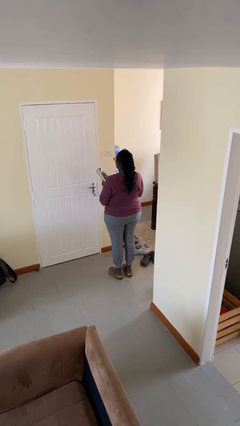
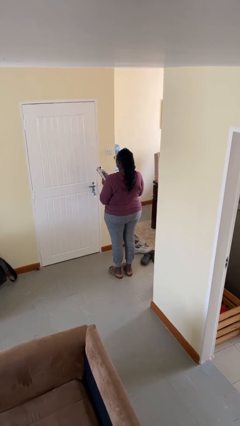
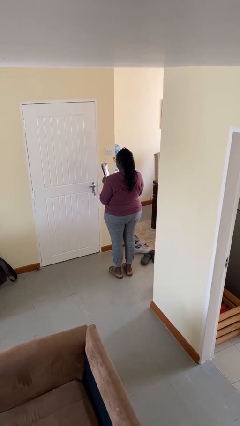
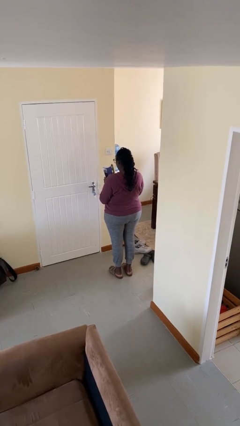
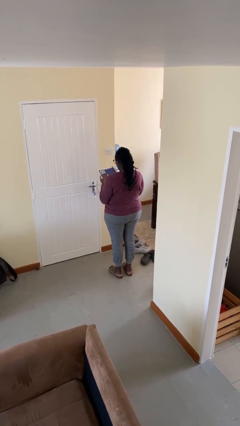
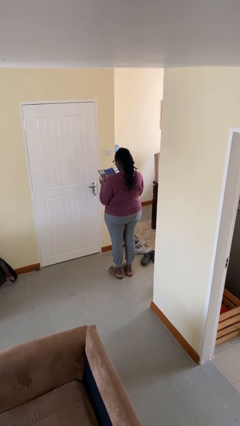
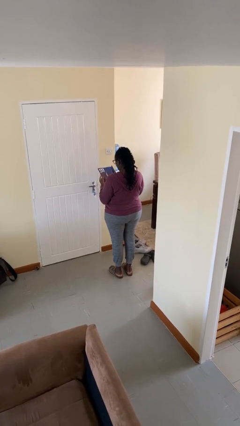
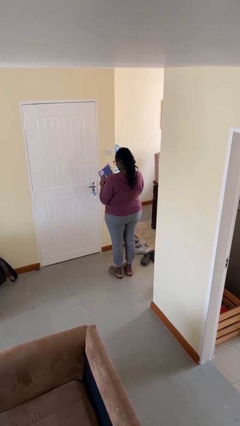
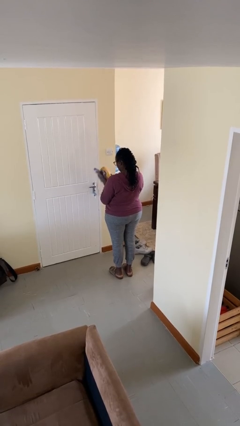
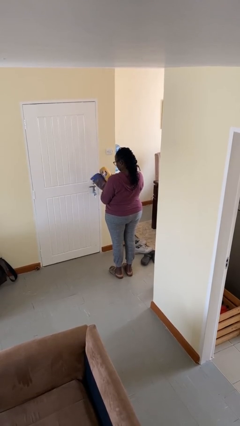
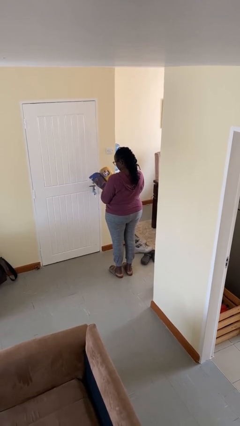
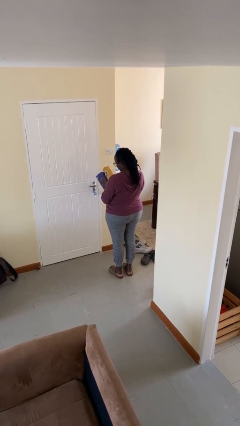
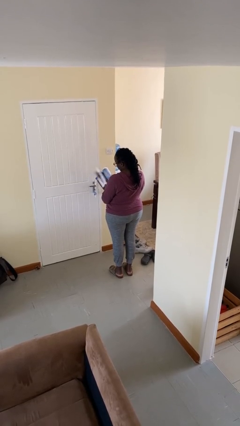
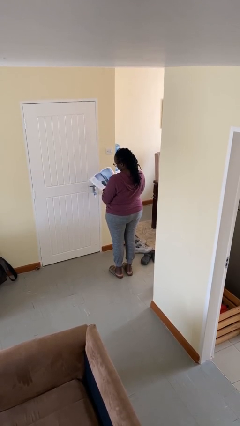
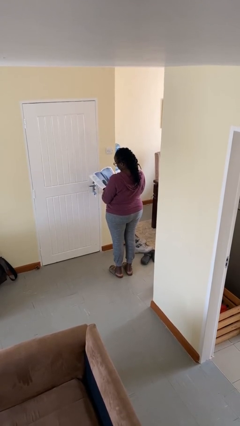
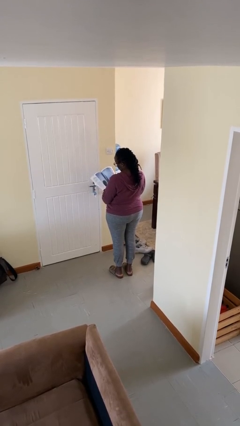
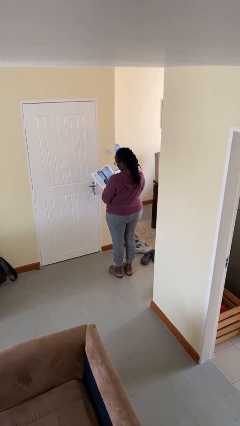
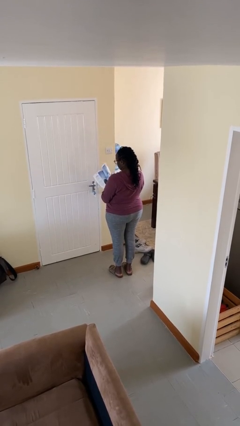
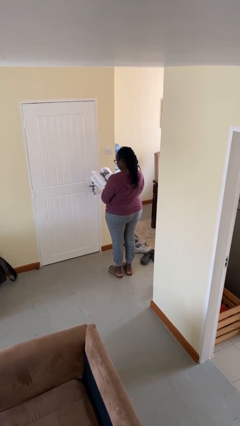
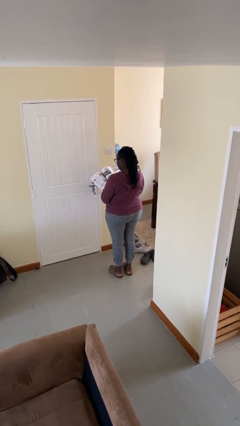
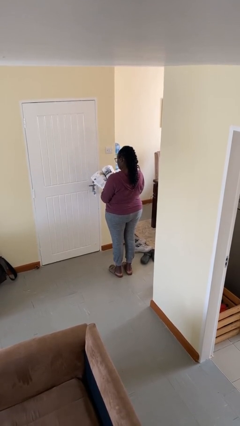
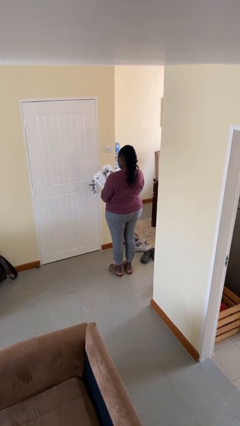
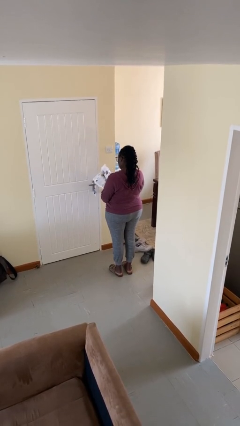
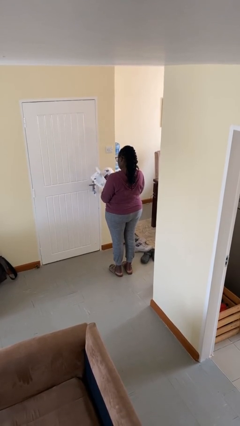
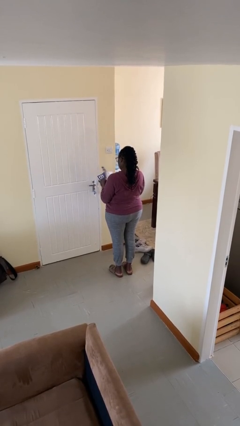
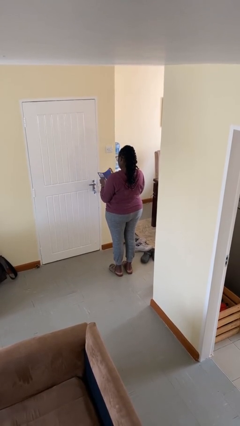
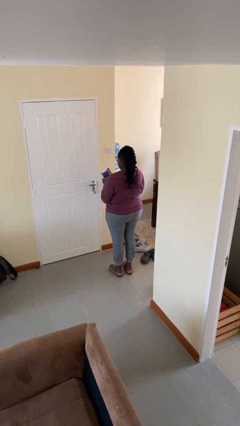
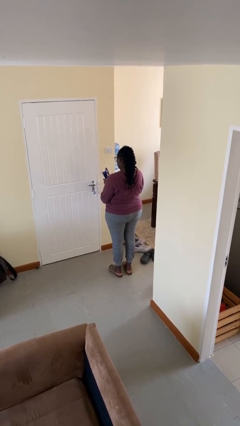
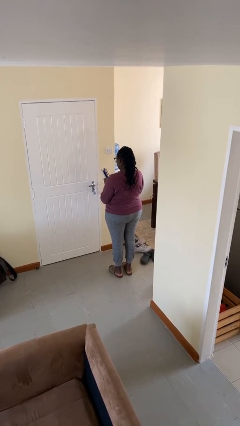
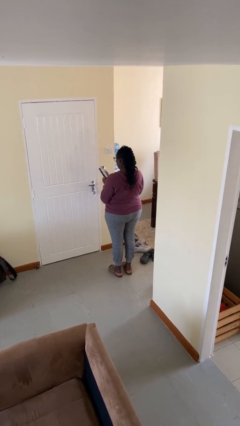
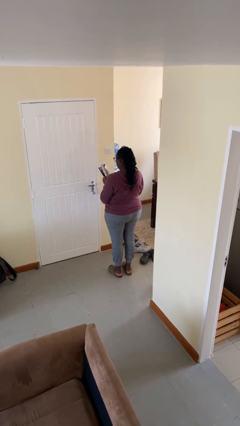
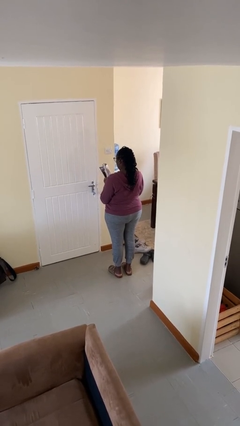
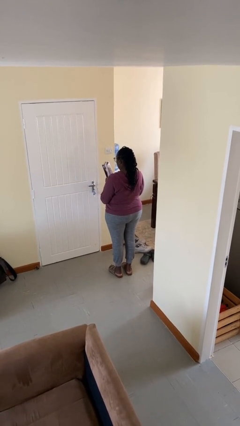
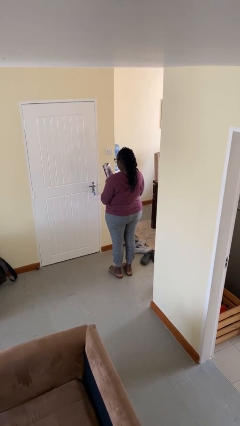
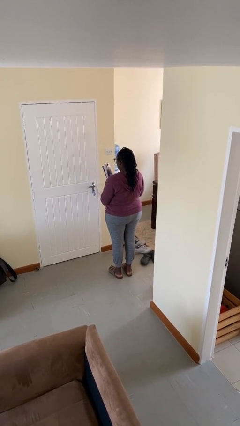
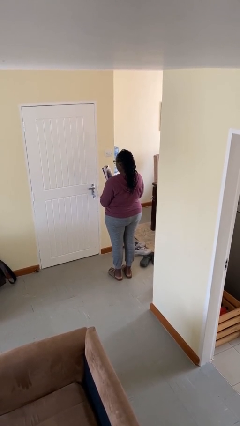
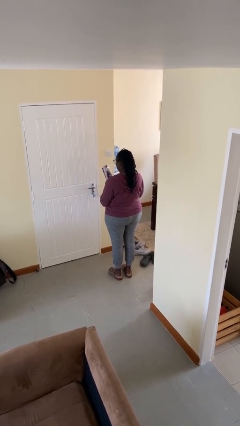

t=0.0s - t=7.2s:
person reads magazine

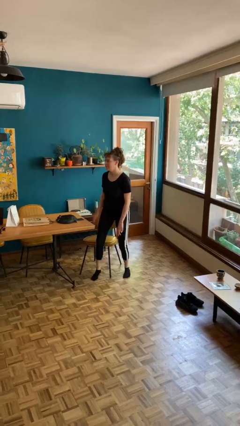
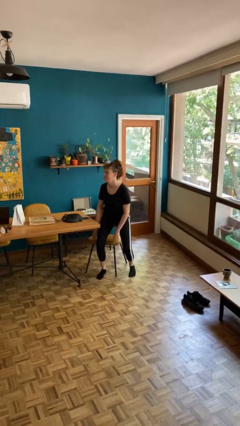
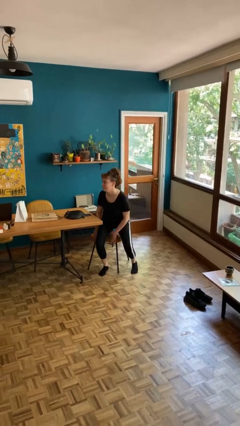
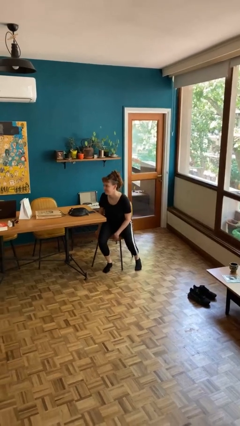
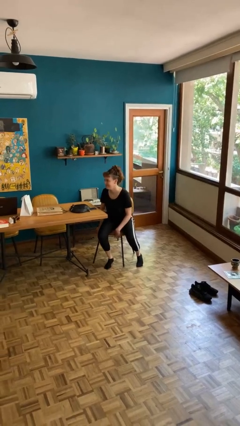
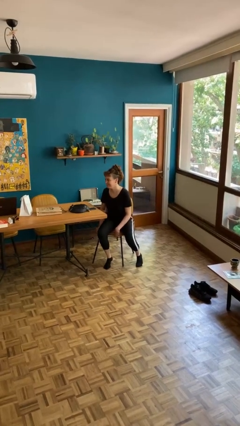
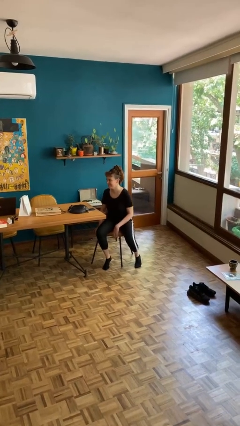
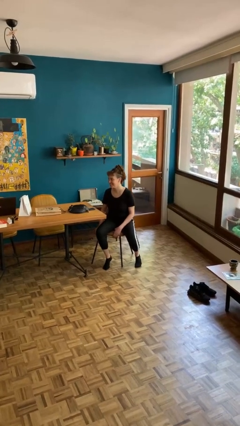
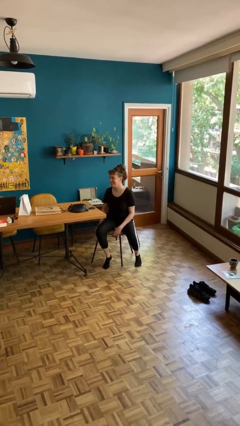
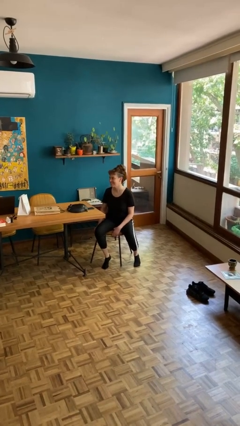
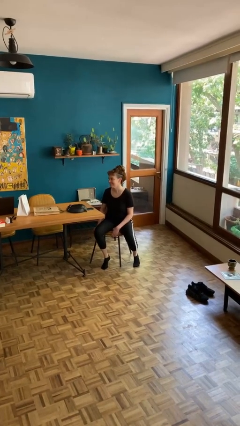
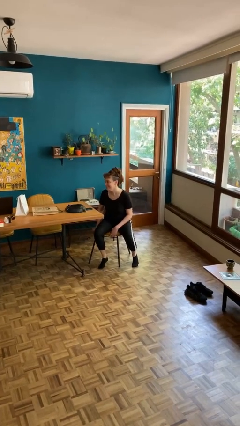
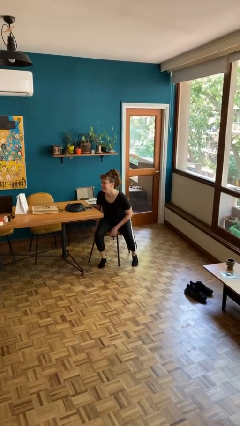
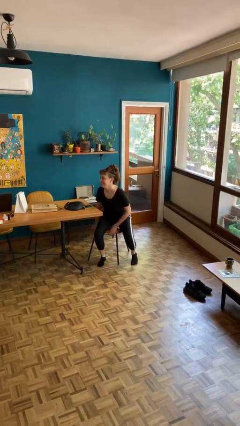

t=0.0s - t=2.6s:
person sits down

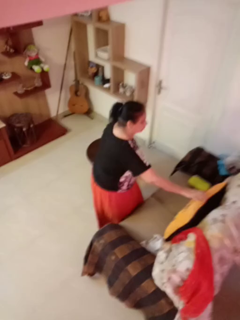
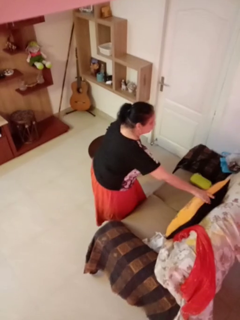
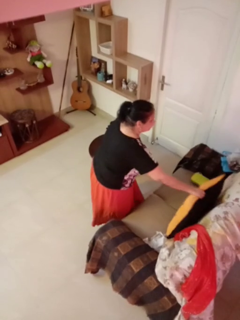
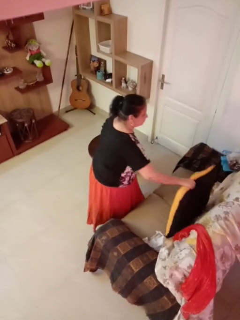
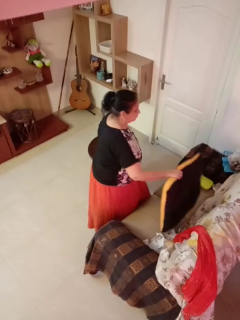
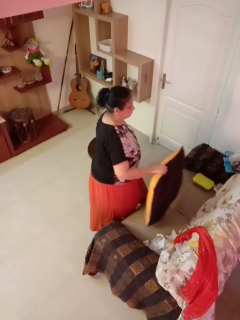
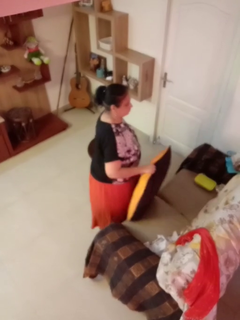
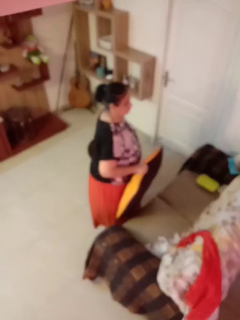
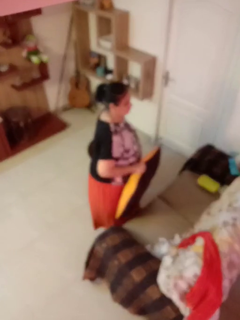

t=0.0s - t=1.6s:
person picks up object from couch

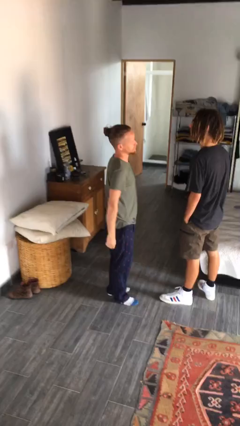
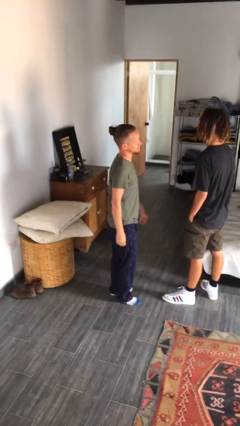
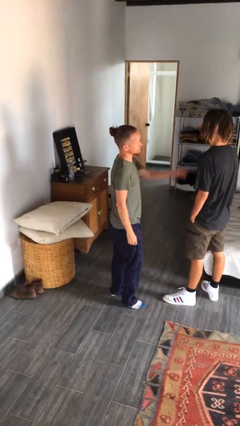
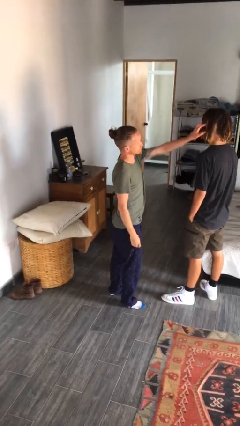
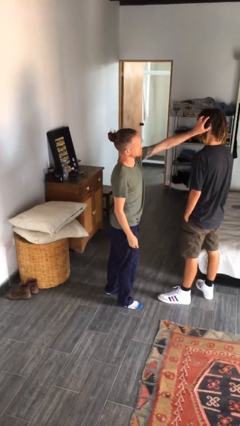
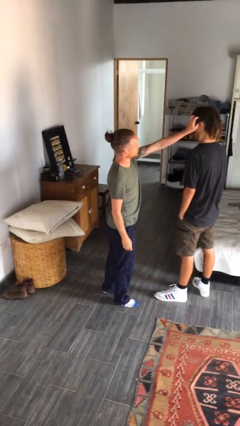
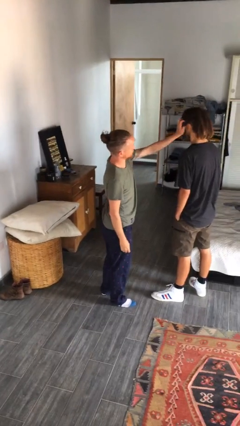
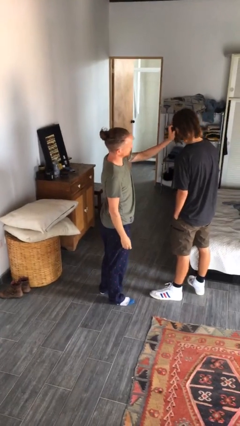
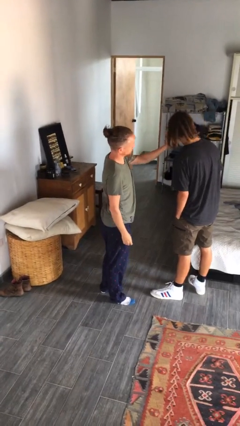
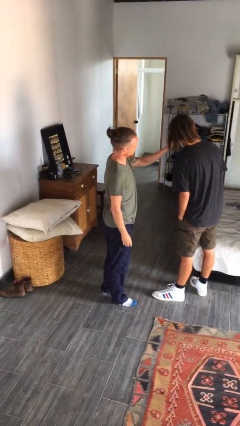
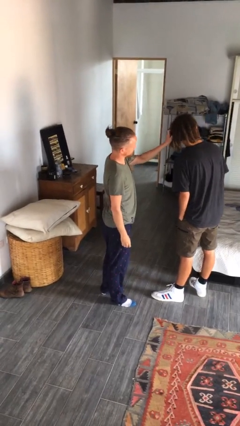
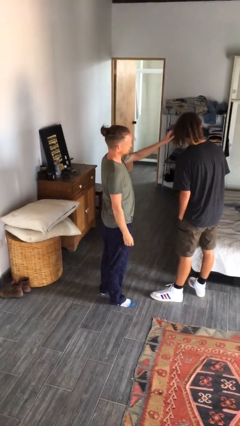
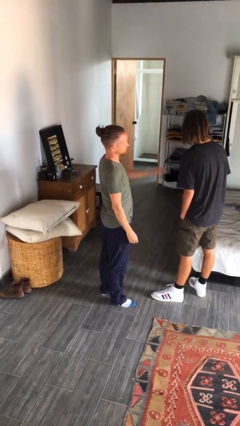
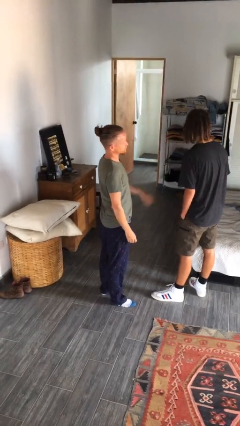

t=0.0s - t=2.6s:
person grabs person by hair

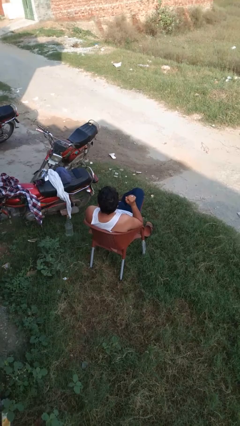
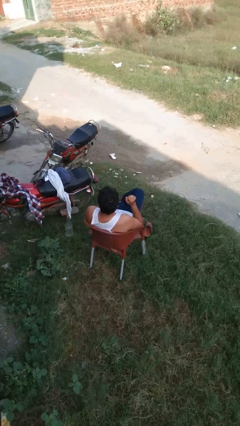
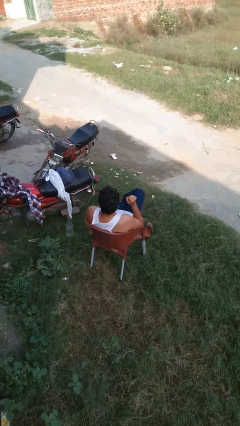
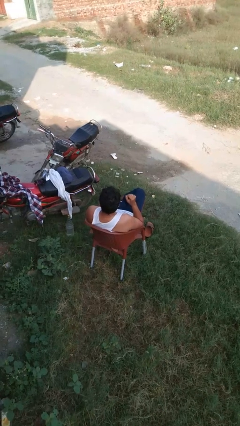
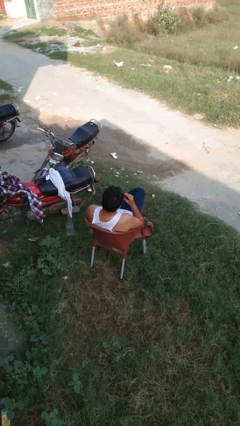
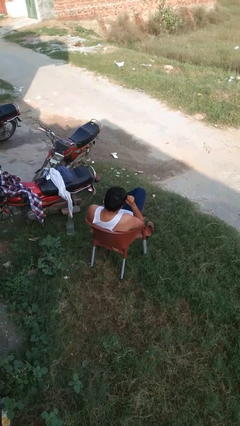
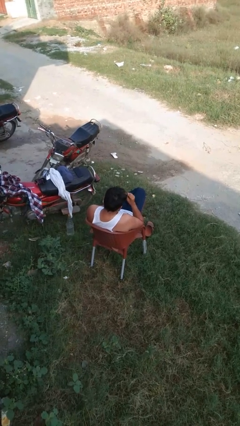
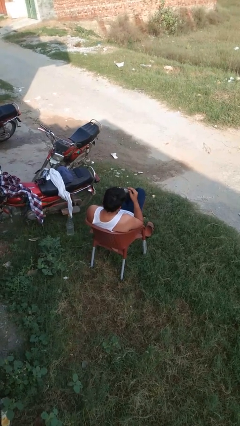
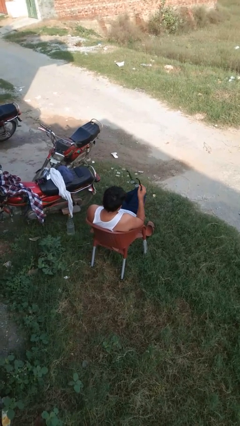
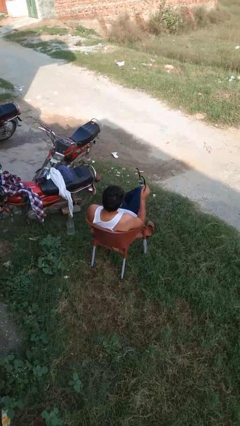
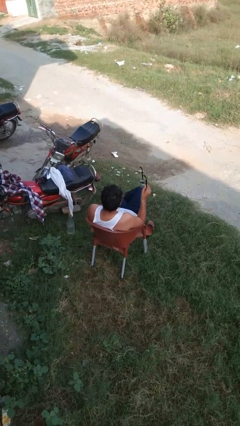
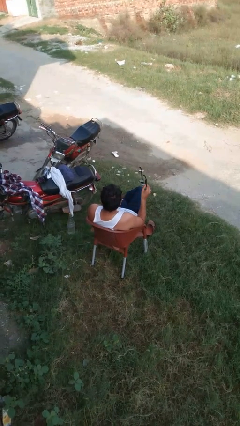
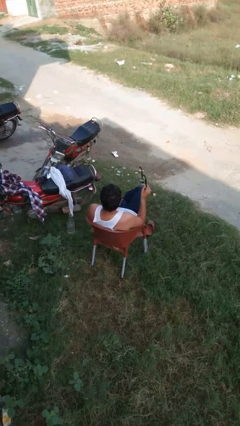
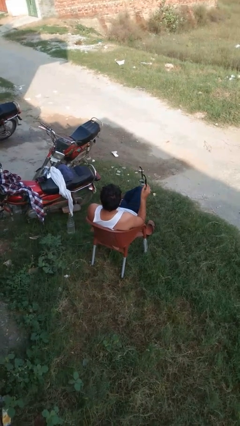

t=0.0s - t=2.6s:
person takes off glasses

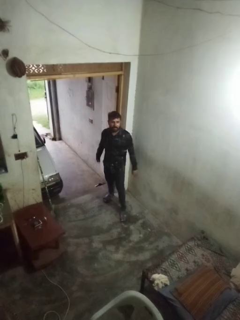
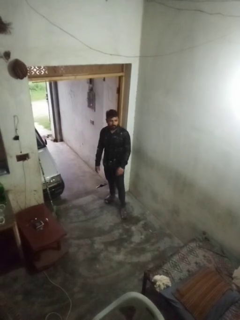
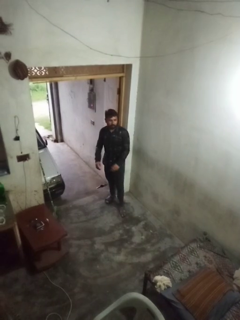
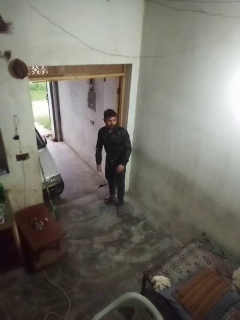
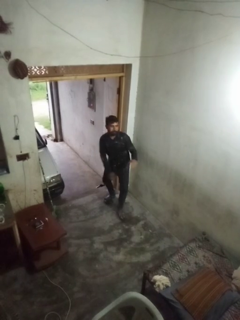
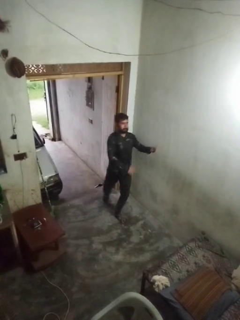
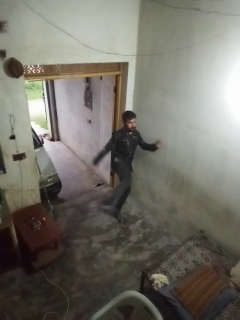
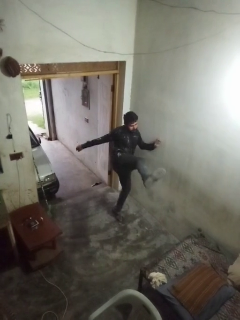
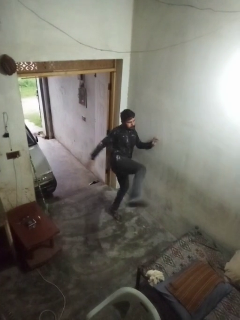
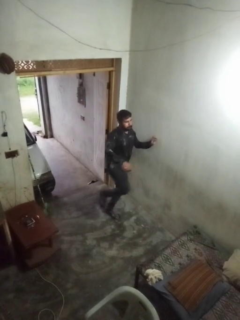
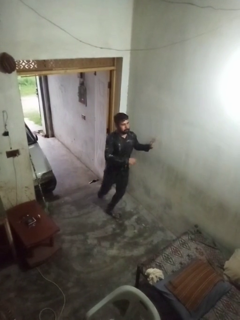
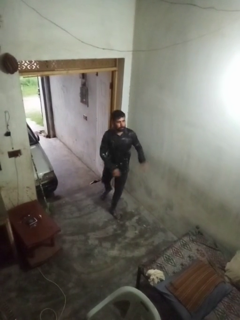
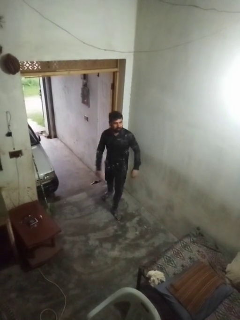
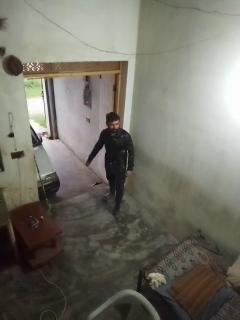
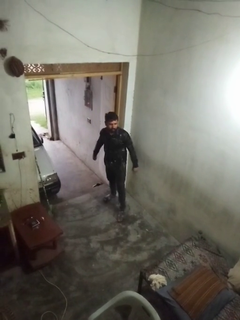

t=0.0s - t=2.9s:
person karate kicks
